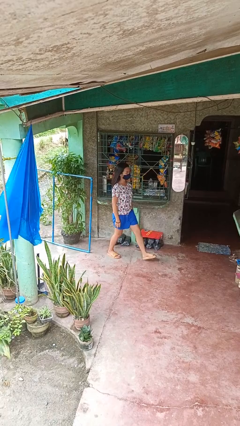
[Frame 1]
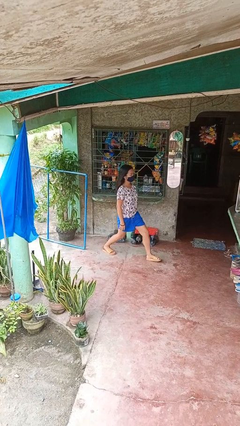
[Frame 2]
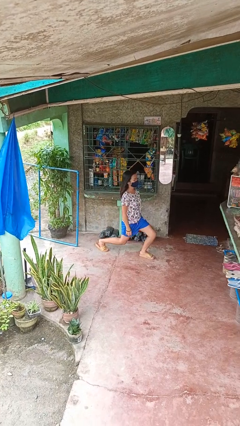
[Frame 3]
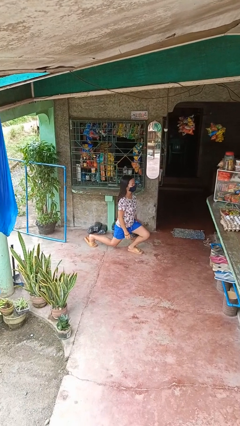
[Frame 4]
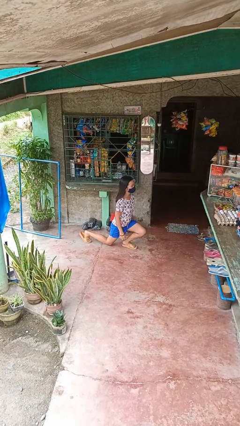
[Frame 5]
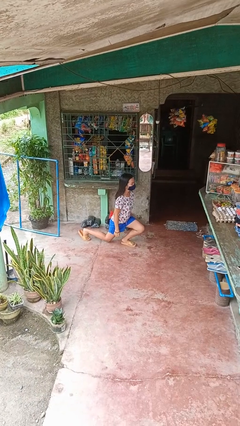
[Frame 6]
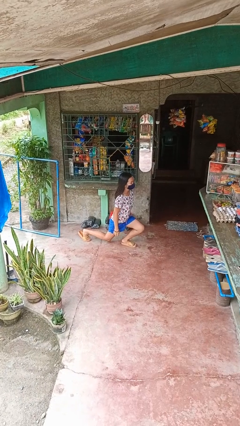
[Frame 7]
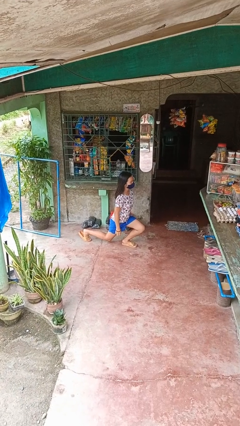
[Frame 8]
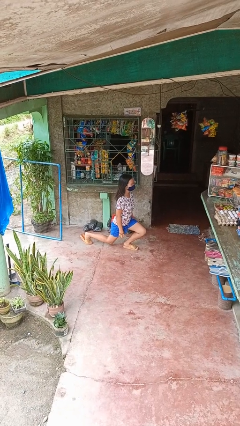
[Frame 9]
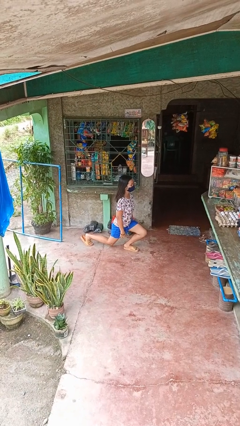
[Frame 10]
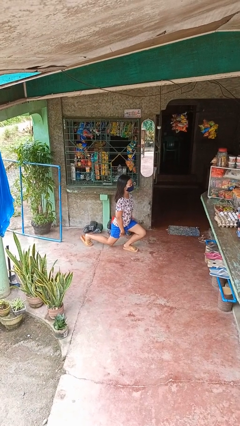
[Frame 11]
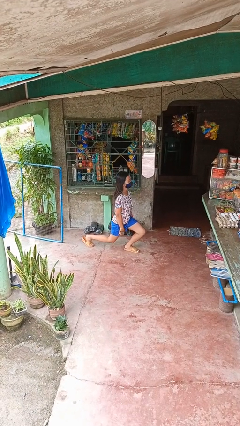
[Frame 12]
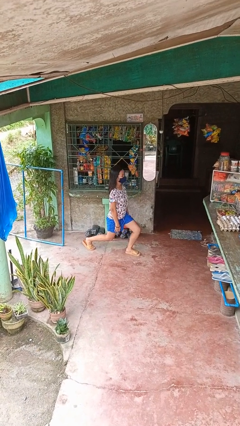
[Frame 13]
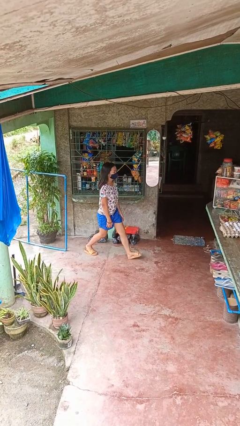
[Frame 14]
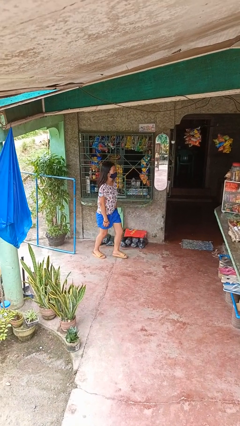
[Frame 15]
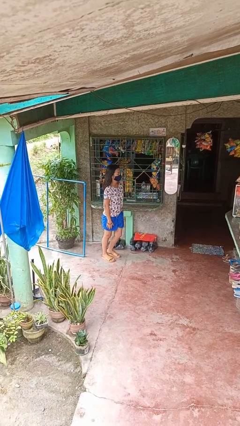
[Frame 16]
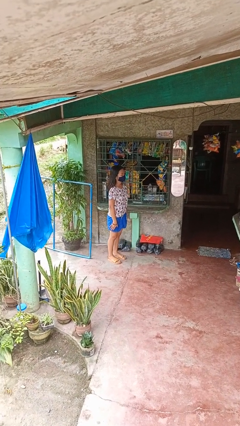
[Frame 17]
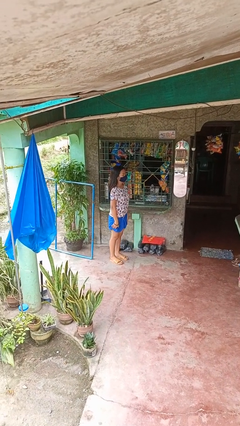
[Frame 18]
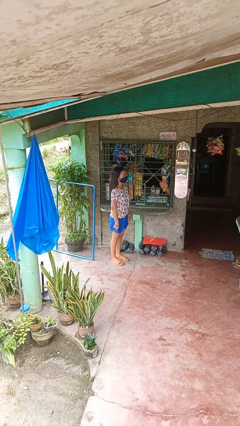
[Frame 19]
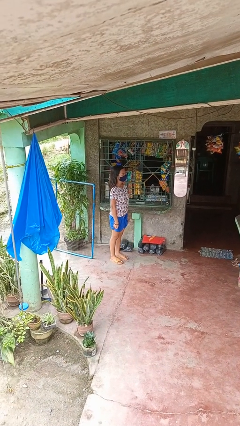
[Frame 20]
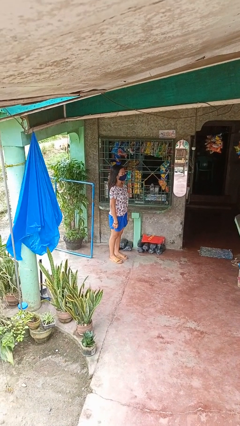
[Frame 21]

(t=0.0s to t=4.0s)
person exercises with lunges

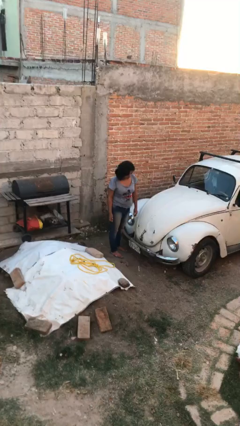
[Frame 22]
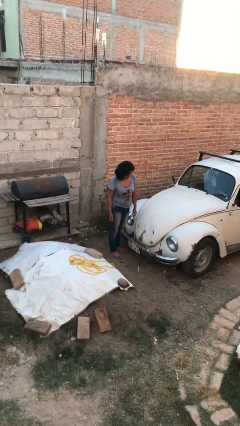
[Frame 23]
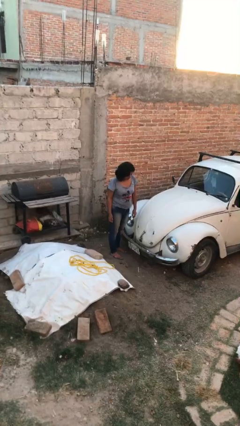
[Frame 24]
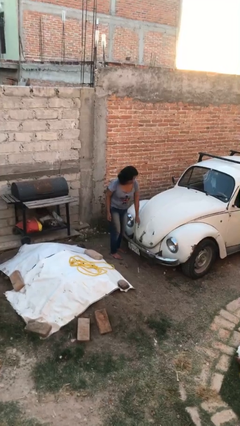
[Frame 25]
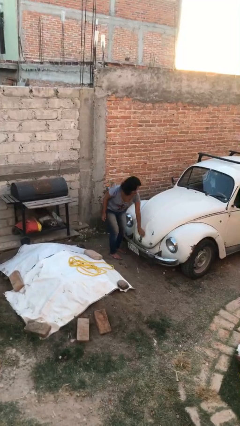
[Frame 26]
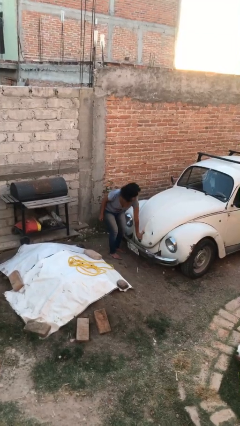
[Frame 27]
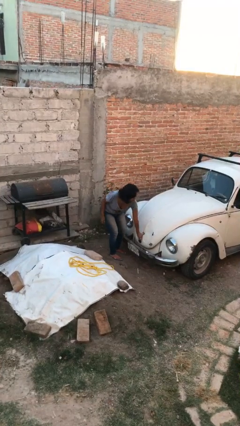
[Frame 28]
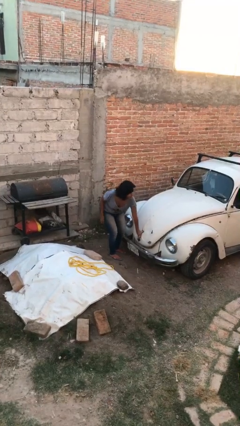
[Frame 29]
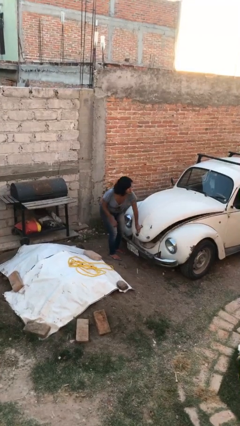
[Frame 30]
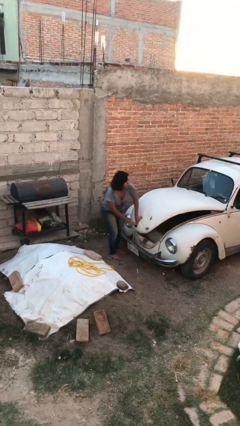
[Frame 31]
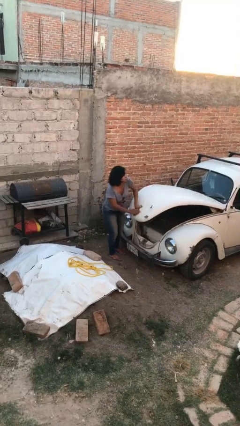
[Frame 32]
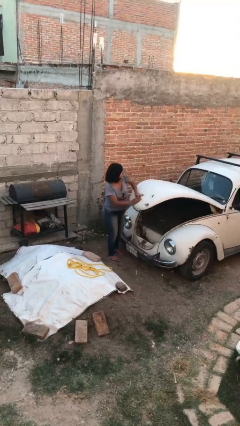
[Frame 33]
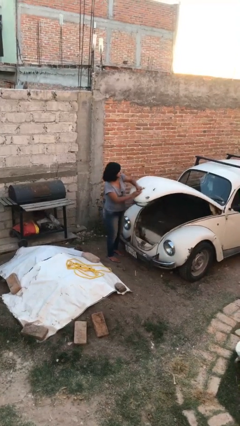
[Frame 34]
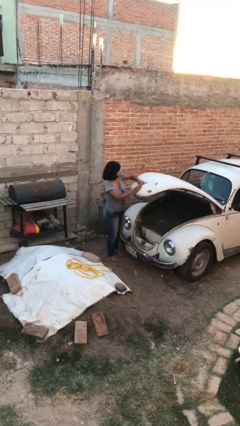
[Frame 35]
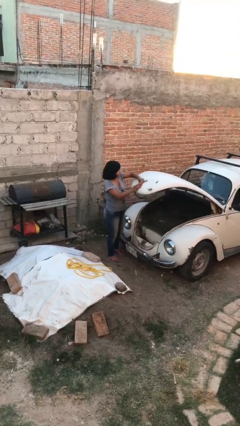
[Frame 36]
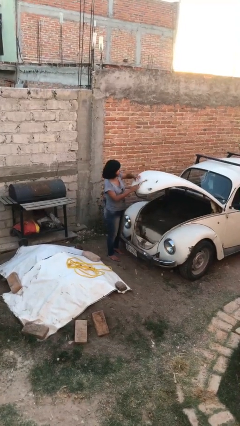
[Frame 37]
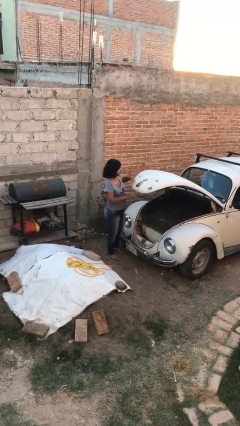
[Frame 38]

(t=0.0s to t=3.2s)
person opens car trunk

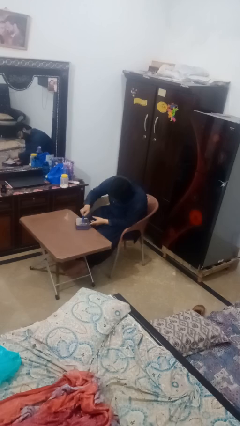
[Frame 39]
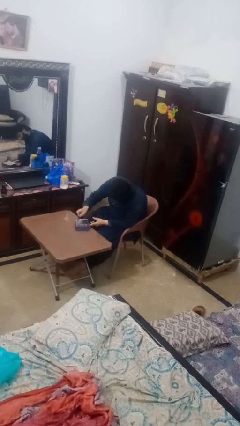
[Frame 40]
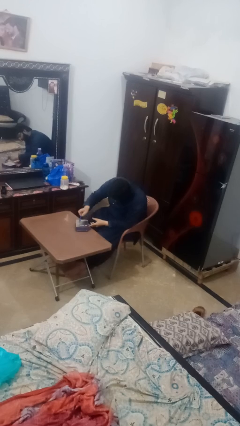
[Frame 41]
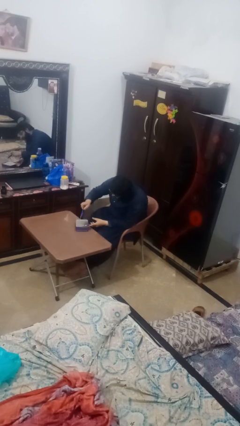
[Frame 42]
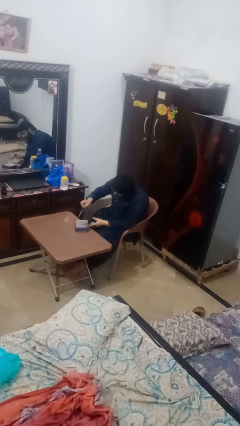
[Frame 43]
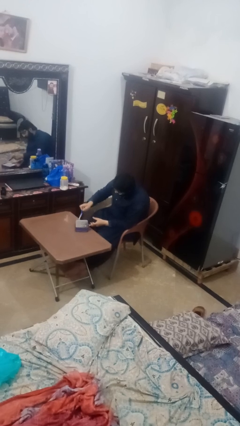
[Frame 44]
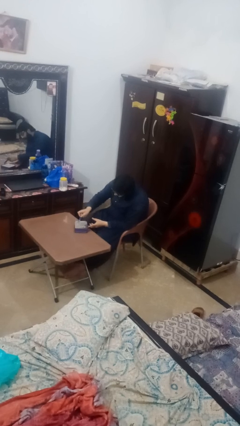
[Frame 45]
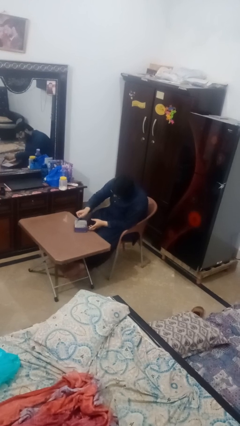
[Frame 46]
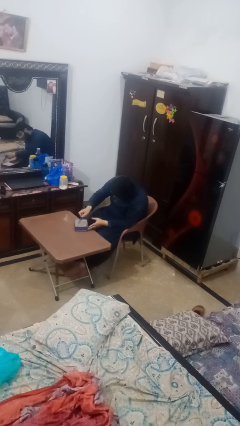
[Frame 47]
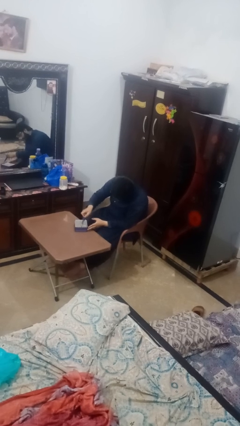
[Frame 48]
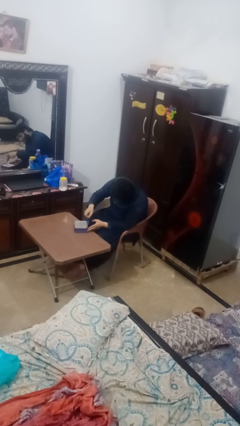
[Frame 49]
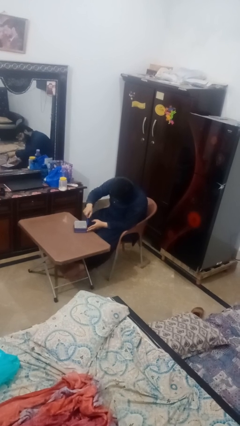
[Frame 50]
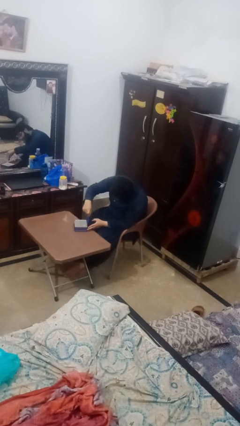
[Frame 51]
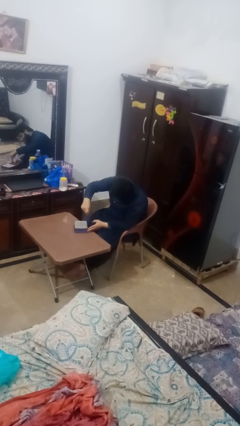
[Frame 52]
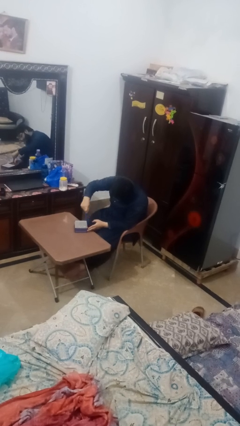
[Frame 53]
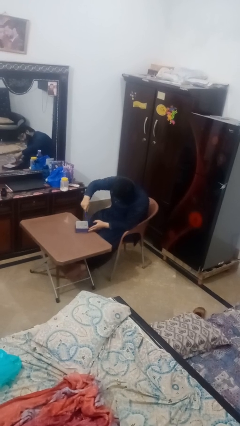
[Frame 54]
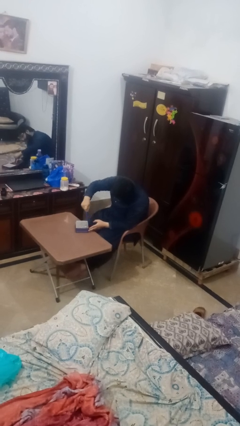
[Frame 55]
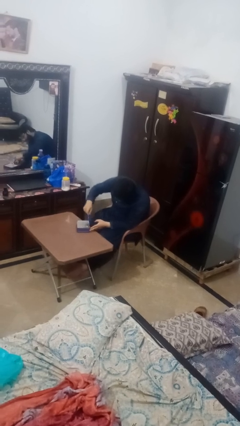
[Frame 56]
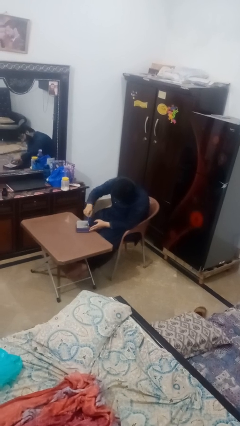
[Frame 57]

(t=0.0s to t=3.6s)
person opens can with can opener

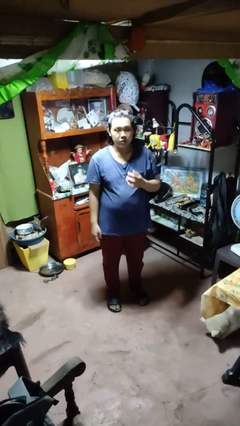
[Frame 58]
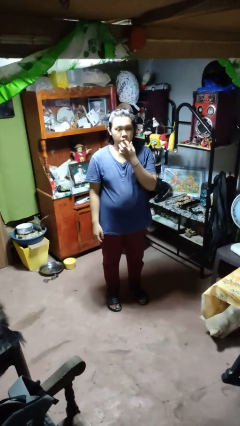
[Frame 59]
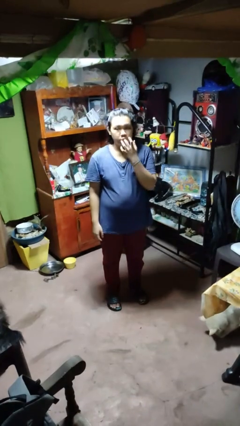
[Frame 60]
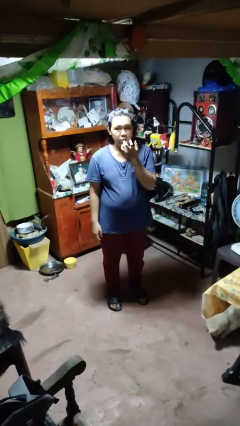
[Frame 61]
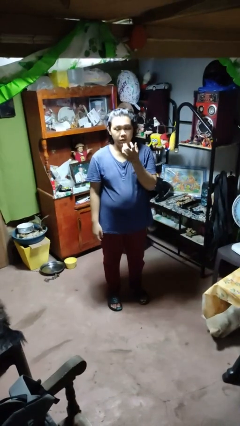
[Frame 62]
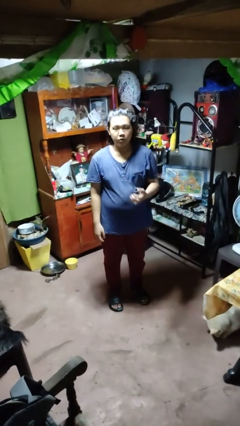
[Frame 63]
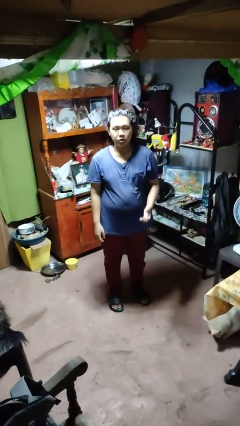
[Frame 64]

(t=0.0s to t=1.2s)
person licks fingers

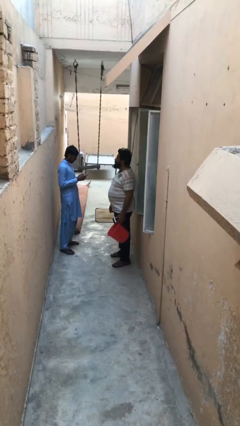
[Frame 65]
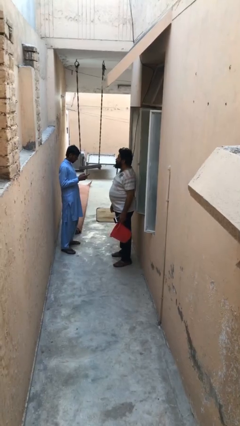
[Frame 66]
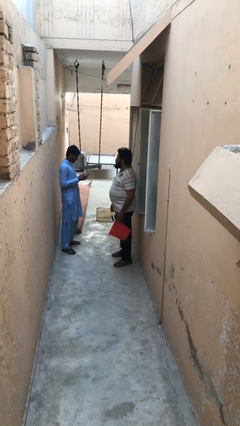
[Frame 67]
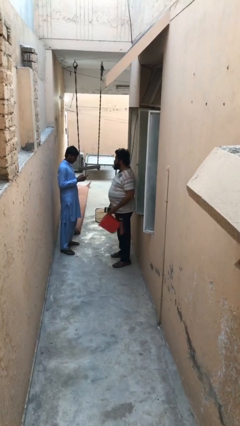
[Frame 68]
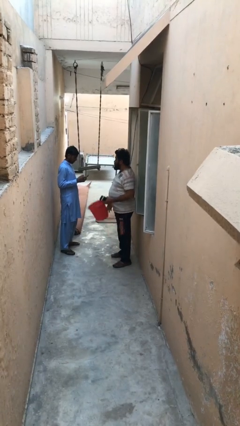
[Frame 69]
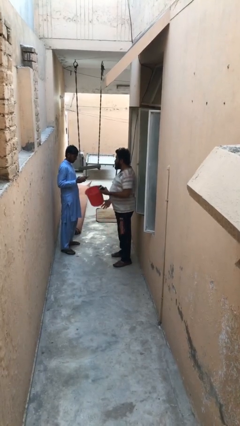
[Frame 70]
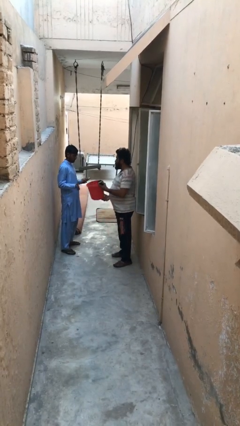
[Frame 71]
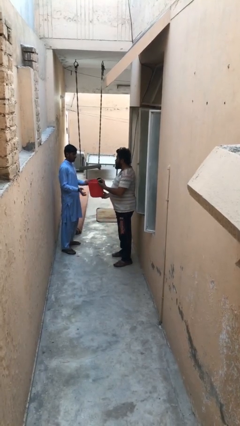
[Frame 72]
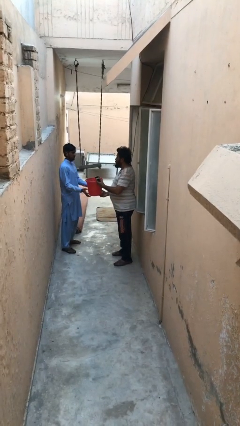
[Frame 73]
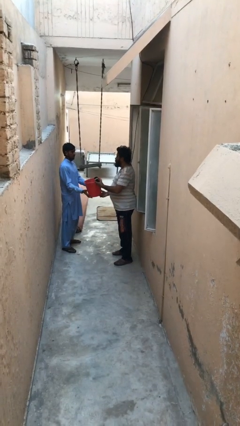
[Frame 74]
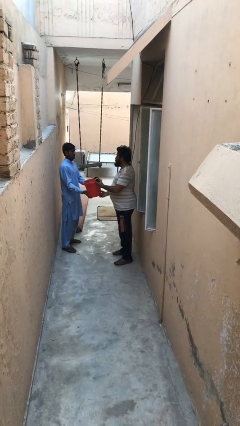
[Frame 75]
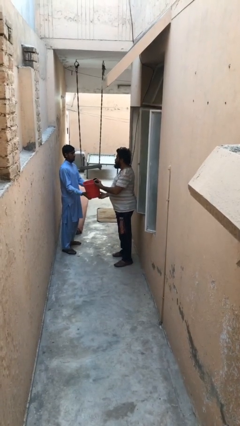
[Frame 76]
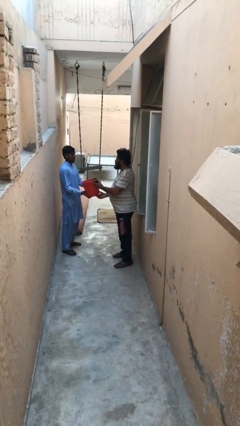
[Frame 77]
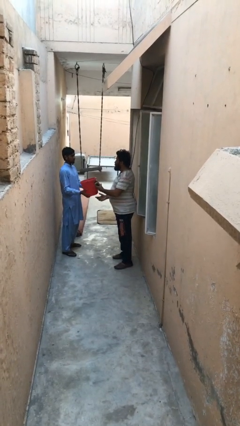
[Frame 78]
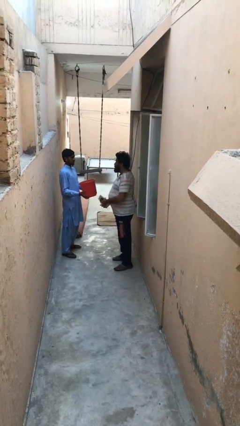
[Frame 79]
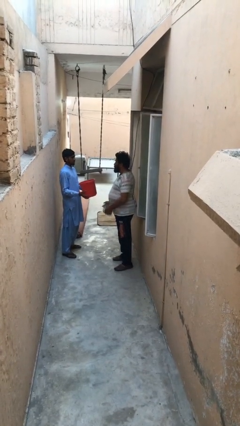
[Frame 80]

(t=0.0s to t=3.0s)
person transfers object to person

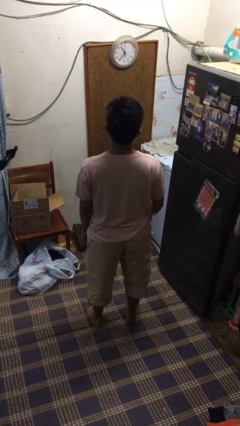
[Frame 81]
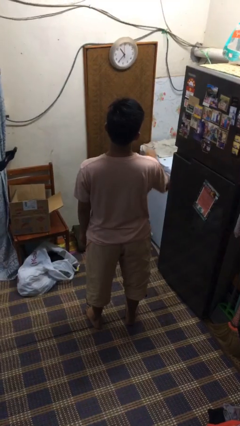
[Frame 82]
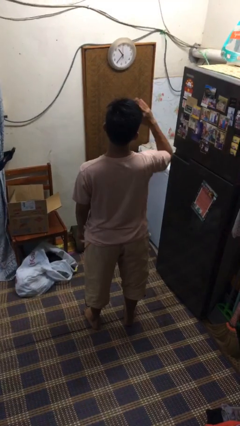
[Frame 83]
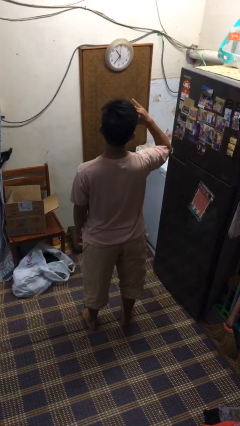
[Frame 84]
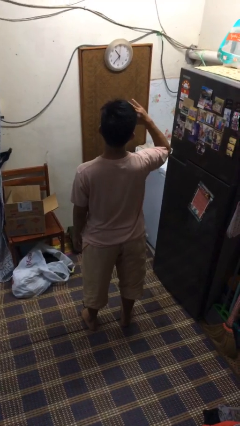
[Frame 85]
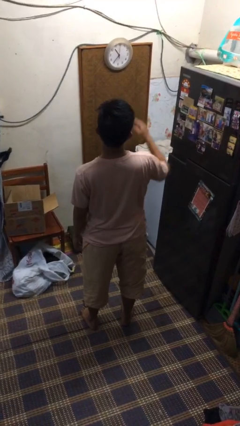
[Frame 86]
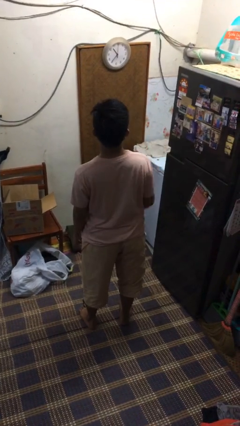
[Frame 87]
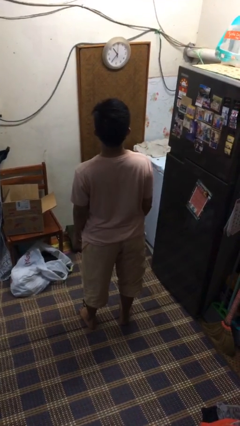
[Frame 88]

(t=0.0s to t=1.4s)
person salutes

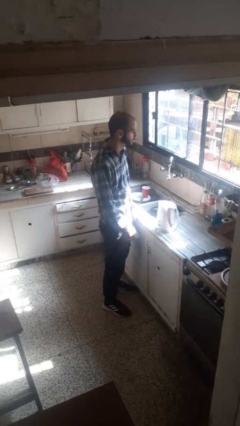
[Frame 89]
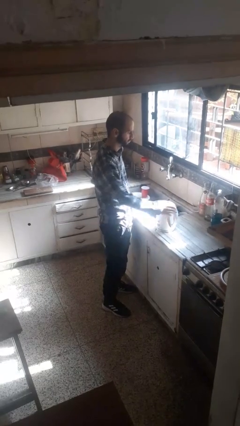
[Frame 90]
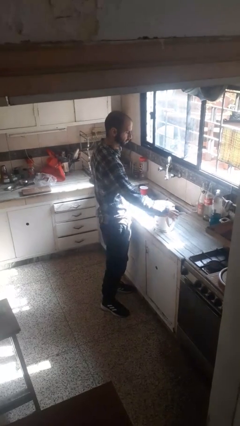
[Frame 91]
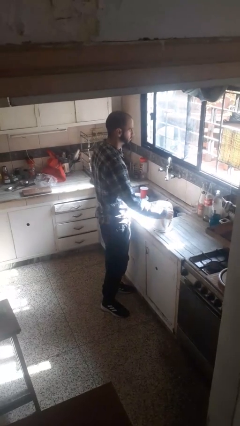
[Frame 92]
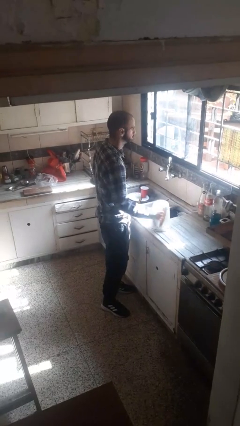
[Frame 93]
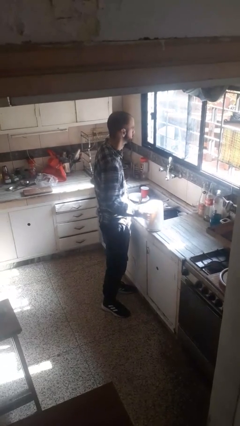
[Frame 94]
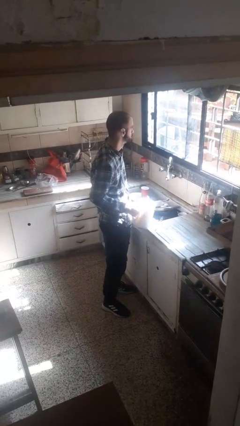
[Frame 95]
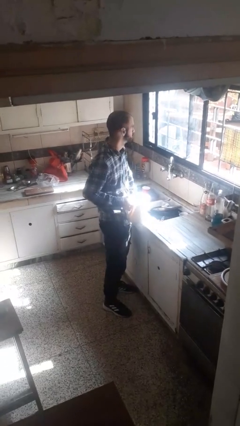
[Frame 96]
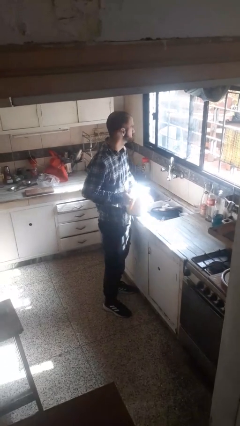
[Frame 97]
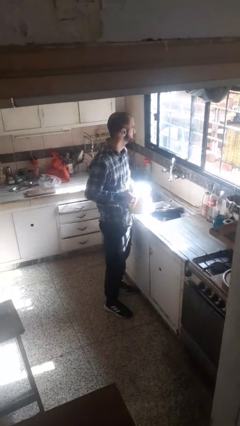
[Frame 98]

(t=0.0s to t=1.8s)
person picks up object from countertop
